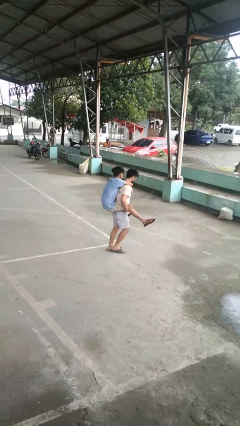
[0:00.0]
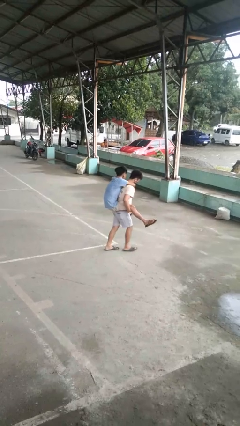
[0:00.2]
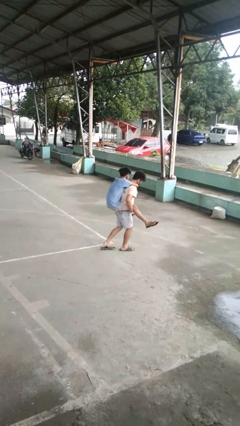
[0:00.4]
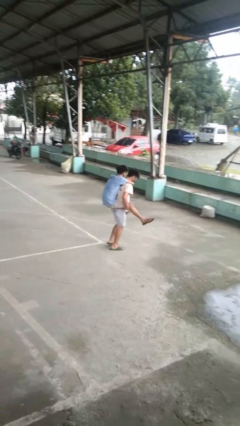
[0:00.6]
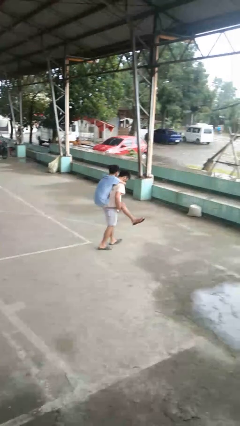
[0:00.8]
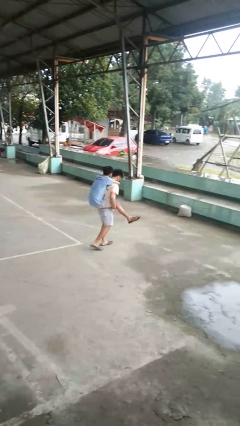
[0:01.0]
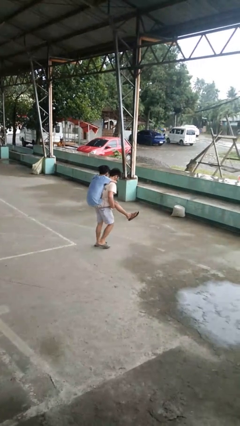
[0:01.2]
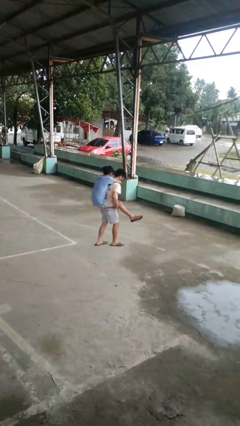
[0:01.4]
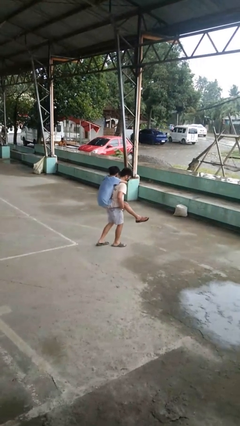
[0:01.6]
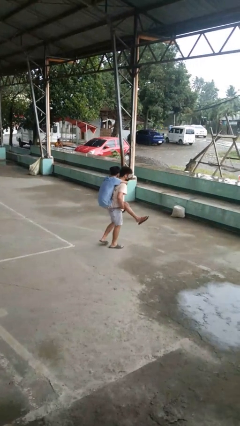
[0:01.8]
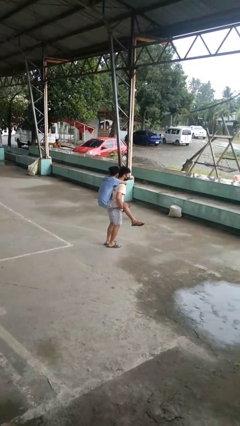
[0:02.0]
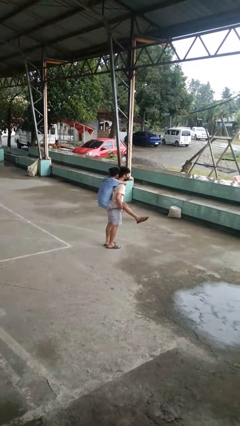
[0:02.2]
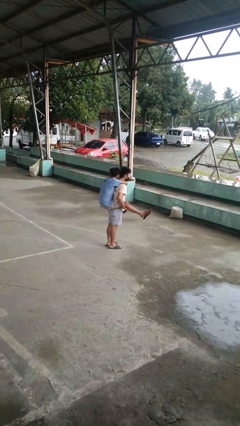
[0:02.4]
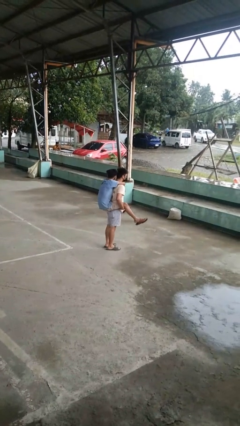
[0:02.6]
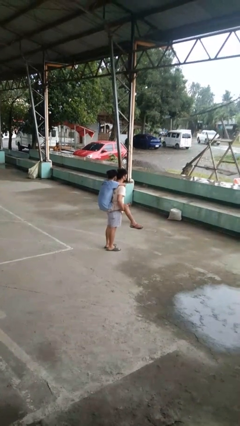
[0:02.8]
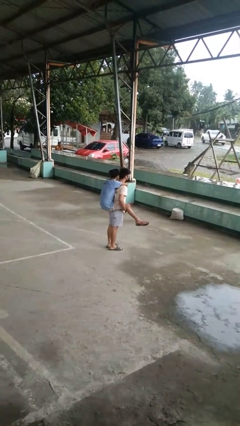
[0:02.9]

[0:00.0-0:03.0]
person carries person on back

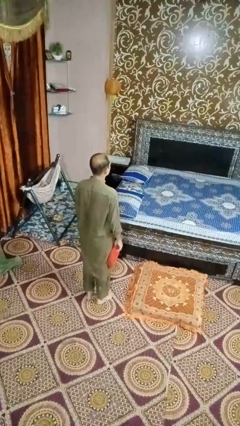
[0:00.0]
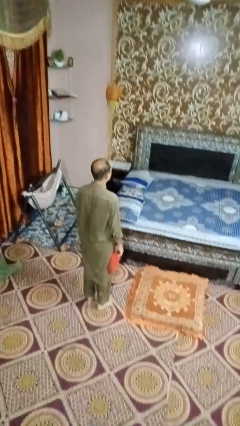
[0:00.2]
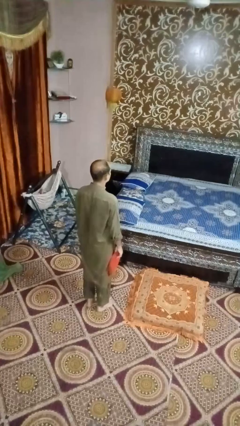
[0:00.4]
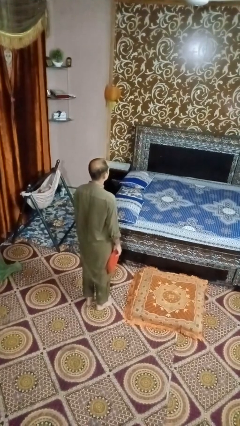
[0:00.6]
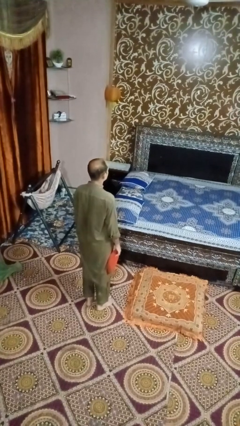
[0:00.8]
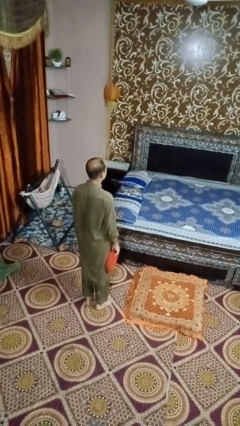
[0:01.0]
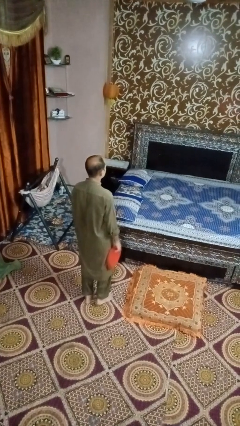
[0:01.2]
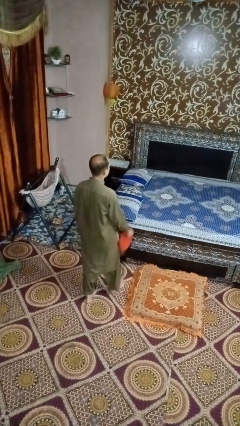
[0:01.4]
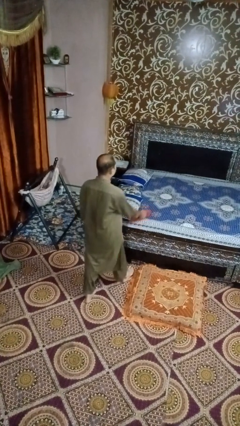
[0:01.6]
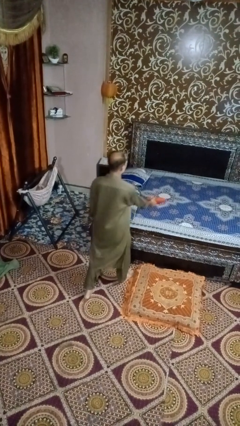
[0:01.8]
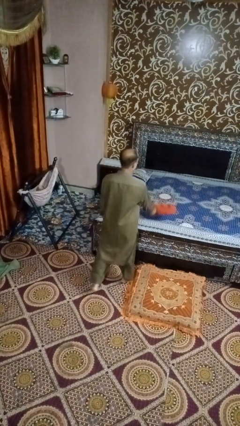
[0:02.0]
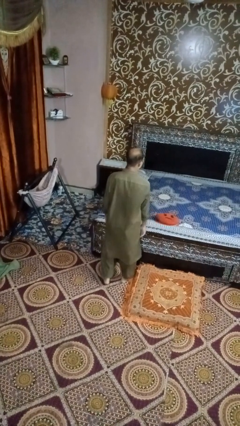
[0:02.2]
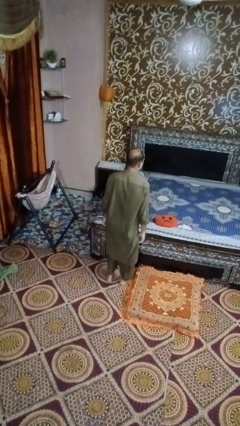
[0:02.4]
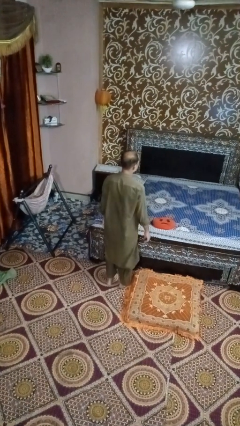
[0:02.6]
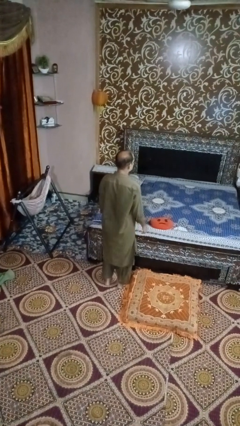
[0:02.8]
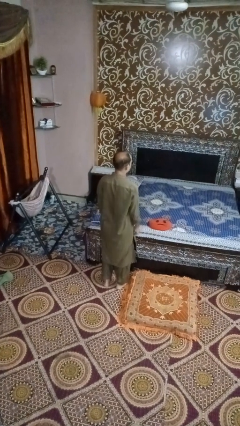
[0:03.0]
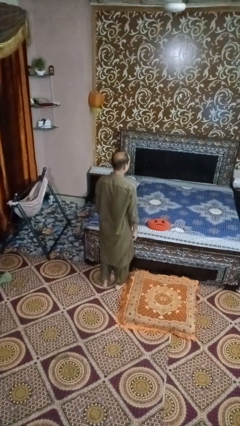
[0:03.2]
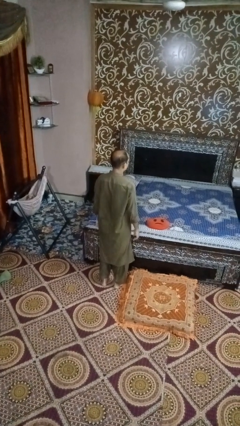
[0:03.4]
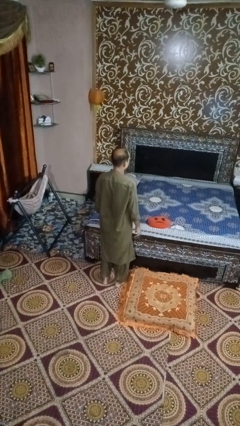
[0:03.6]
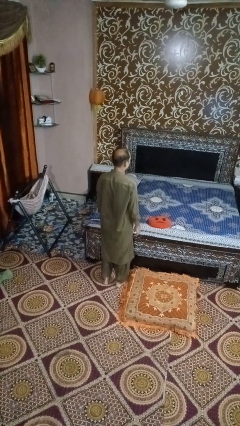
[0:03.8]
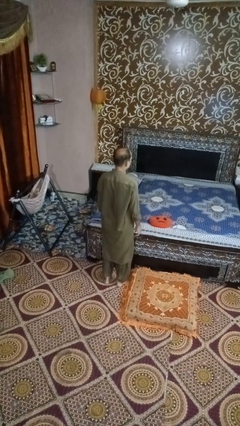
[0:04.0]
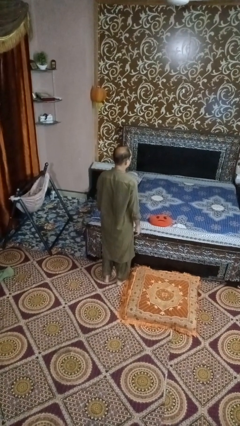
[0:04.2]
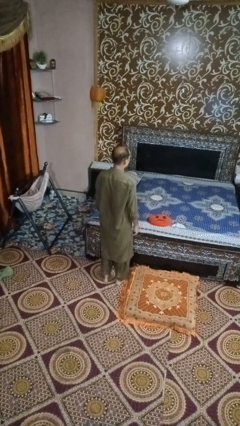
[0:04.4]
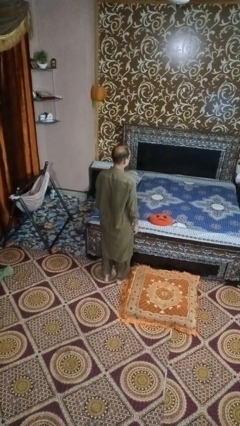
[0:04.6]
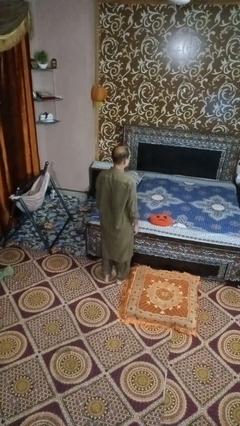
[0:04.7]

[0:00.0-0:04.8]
person throws object on bed

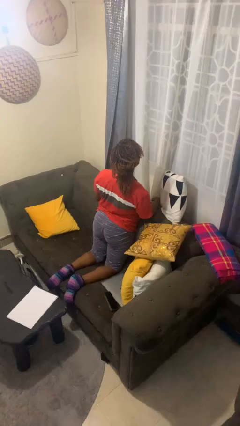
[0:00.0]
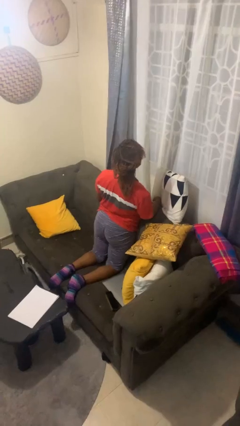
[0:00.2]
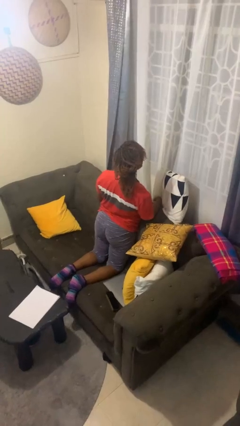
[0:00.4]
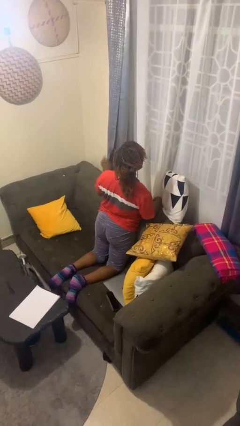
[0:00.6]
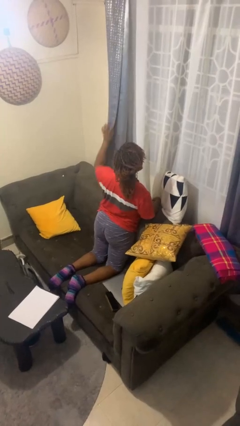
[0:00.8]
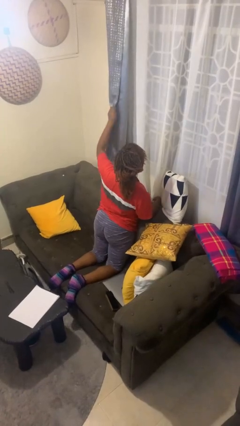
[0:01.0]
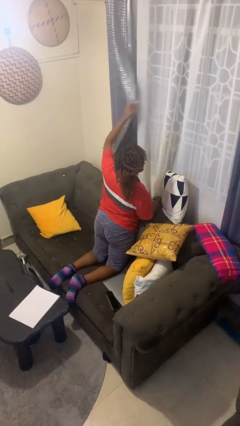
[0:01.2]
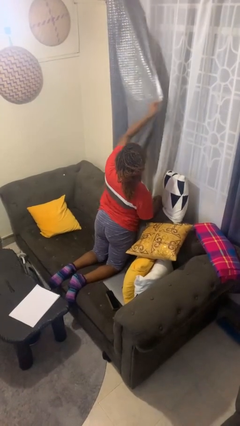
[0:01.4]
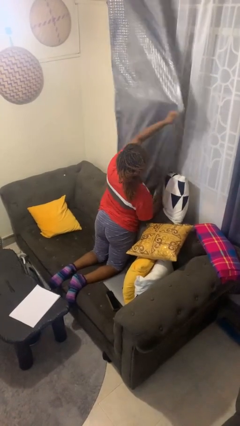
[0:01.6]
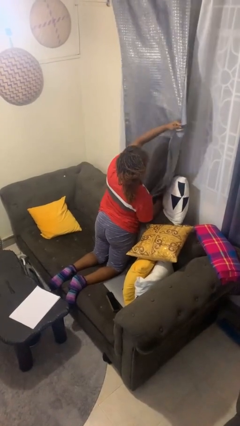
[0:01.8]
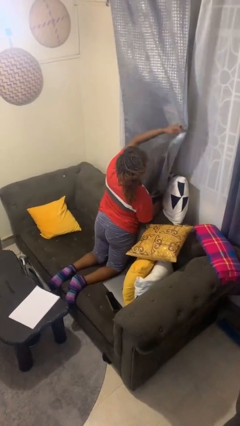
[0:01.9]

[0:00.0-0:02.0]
person closes curtains

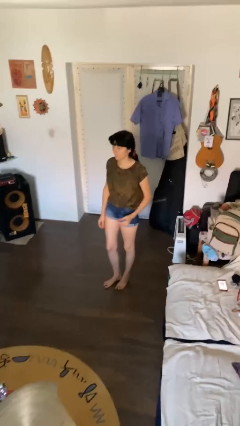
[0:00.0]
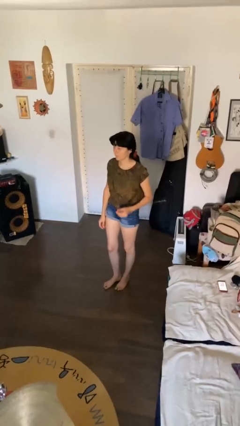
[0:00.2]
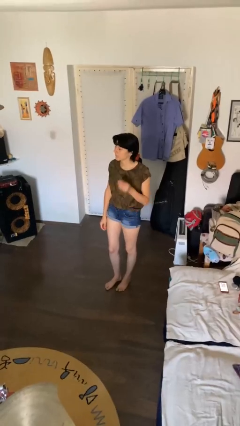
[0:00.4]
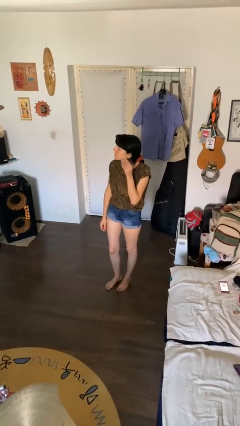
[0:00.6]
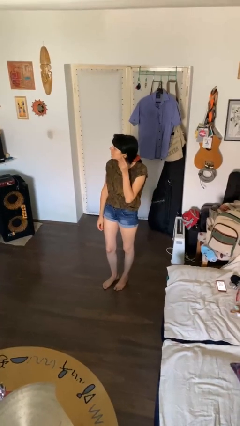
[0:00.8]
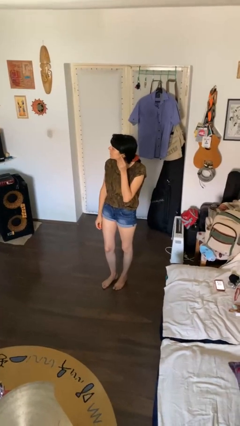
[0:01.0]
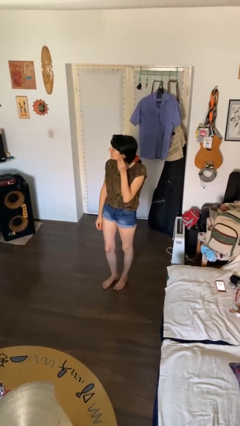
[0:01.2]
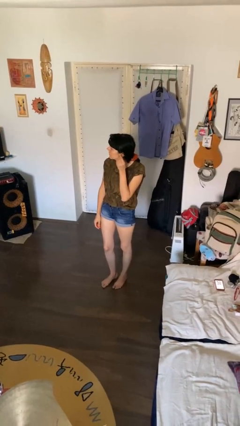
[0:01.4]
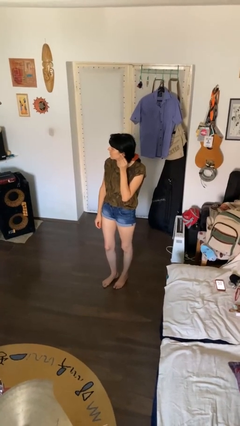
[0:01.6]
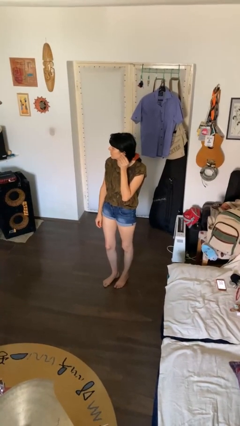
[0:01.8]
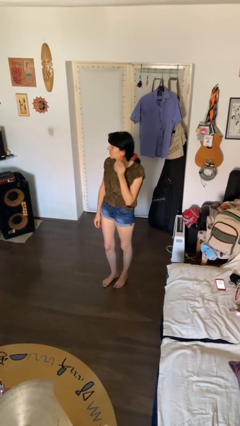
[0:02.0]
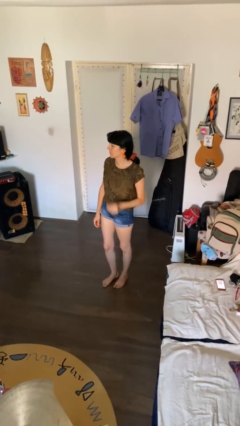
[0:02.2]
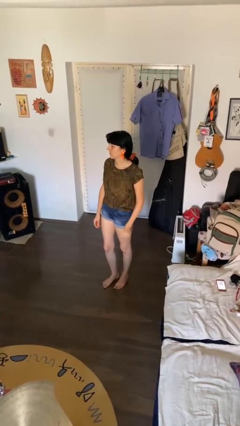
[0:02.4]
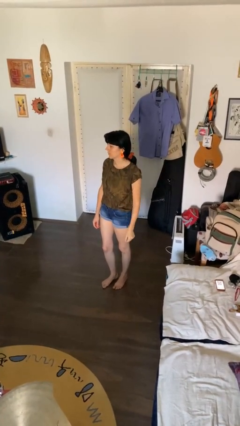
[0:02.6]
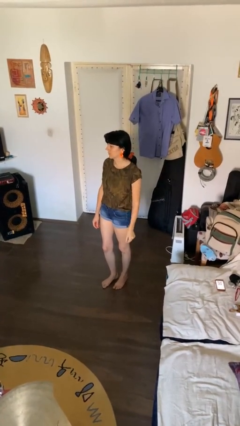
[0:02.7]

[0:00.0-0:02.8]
person puts on earrings

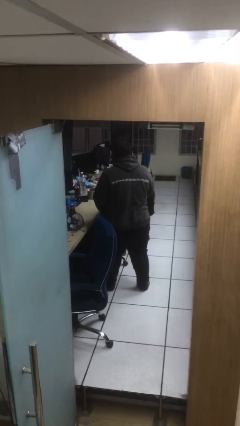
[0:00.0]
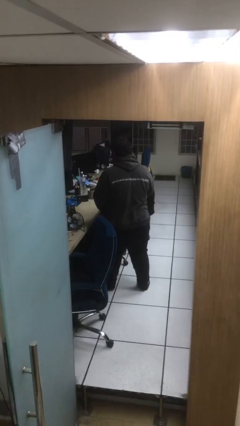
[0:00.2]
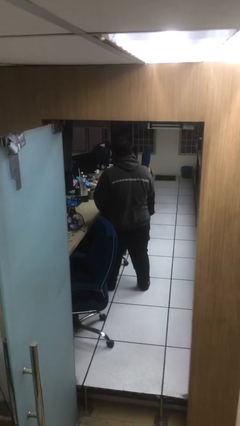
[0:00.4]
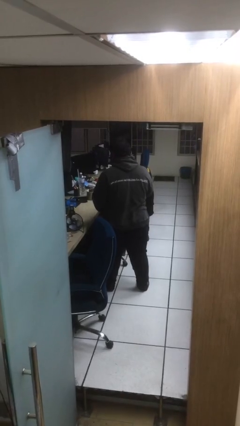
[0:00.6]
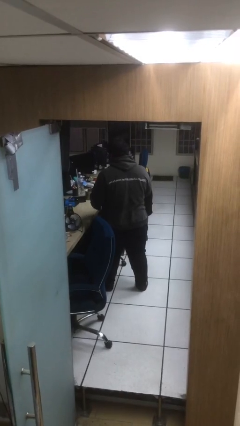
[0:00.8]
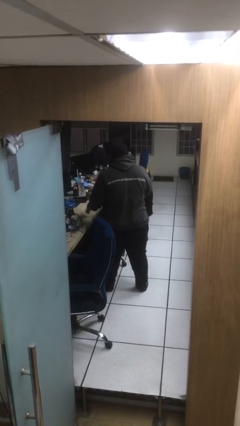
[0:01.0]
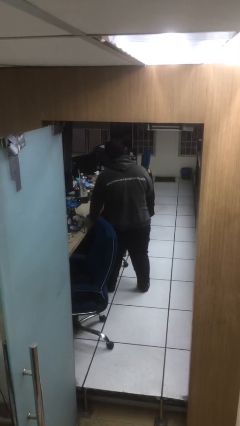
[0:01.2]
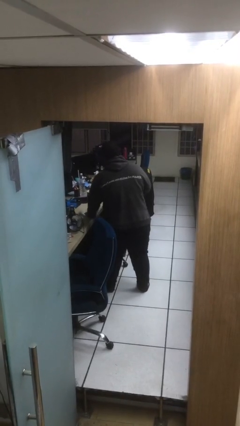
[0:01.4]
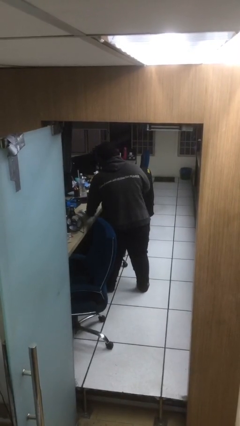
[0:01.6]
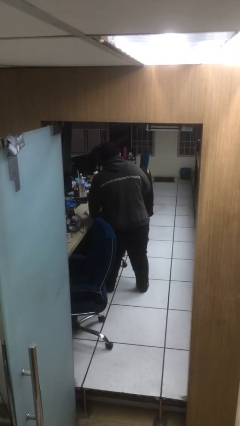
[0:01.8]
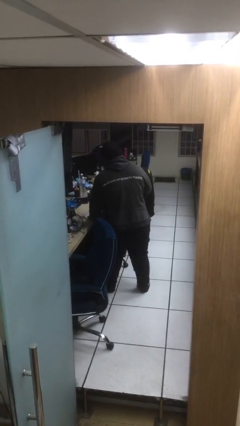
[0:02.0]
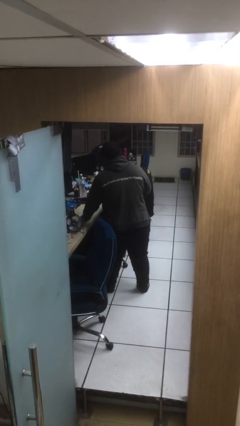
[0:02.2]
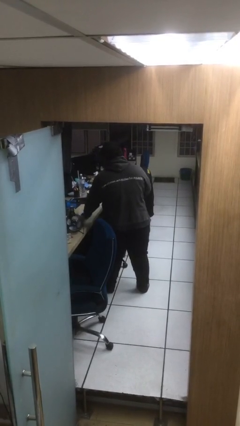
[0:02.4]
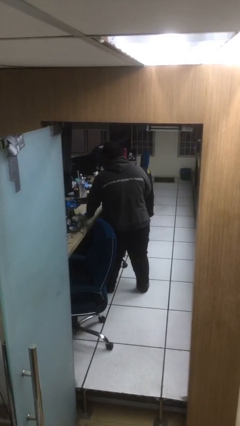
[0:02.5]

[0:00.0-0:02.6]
person cleans table with rag

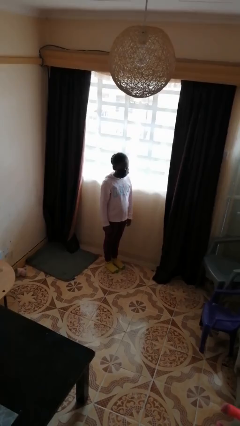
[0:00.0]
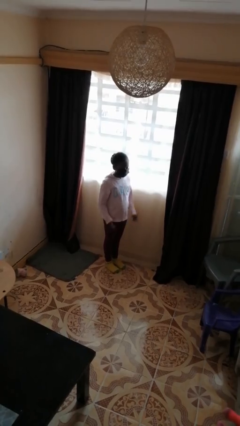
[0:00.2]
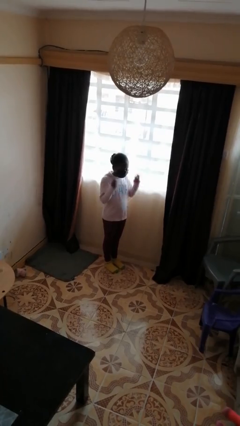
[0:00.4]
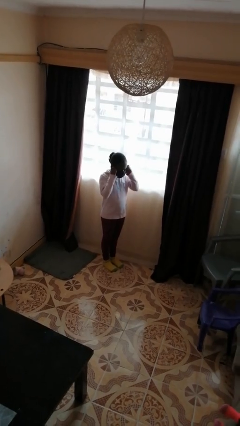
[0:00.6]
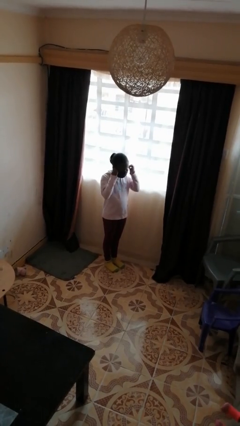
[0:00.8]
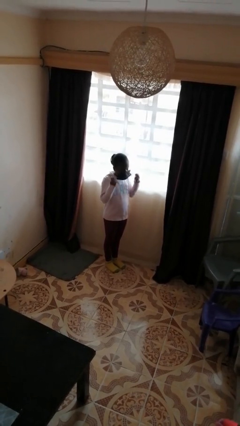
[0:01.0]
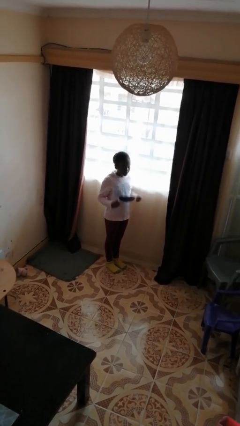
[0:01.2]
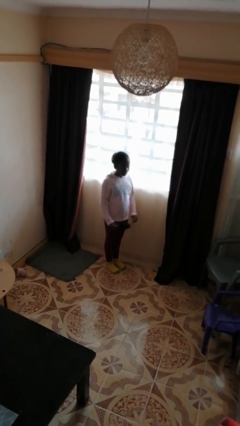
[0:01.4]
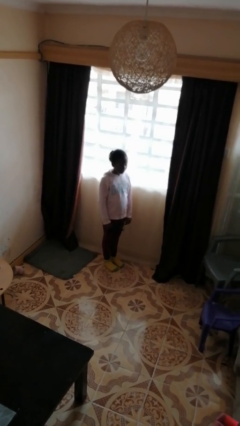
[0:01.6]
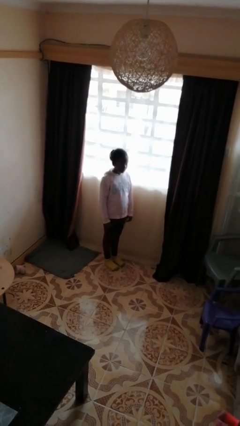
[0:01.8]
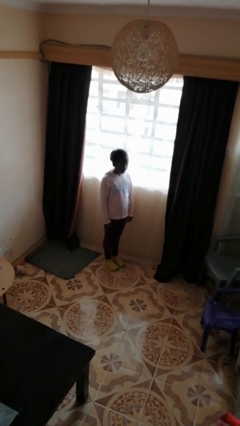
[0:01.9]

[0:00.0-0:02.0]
person takes off facemask
